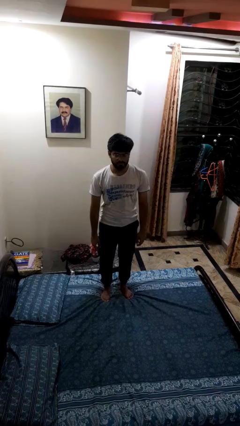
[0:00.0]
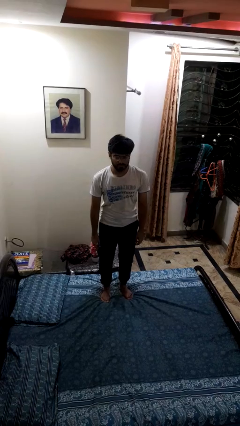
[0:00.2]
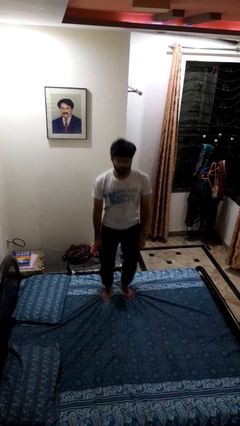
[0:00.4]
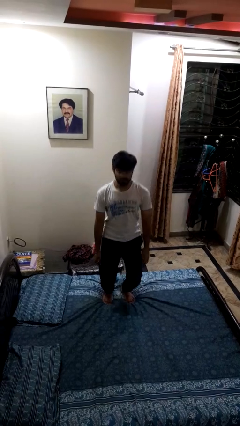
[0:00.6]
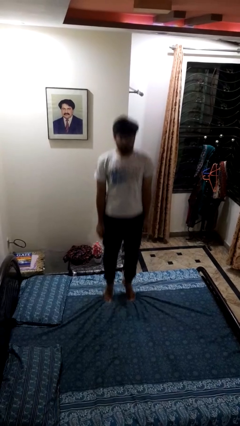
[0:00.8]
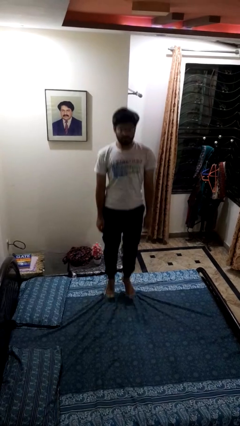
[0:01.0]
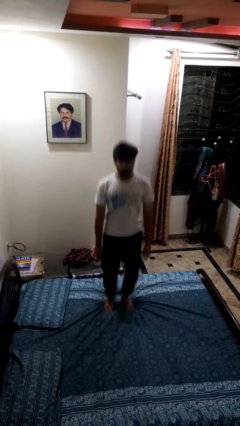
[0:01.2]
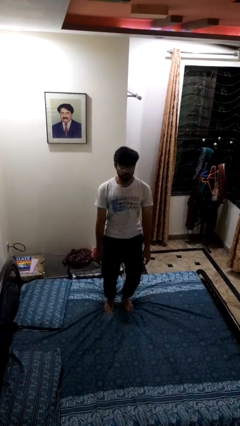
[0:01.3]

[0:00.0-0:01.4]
person jumps on bed

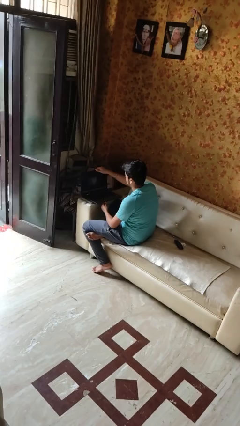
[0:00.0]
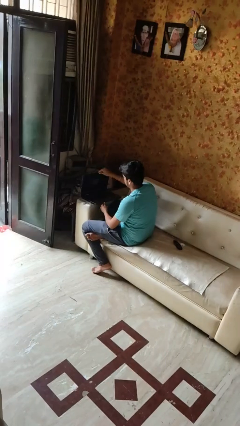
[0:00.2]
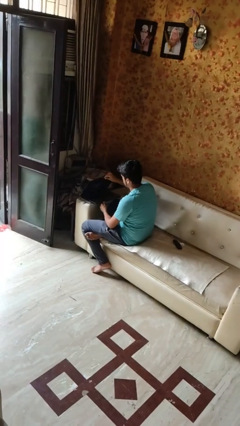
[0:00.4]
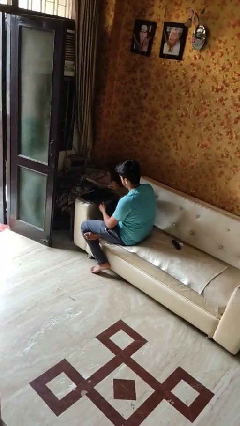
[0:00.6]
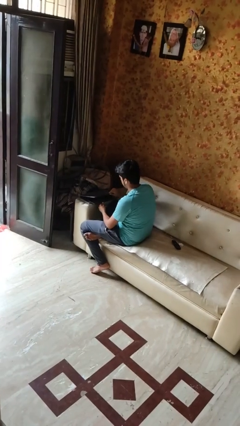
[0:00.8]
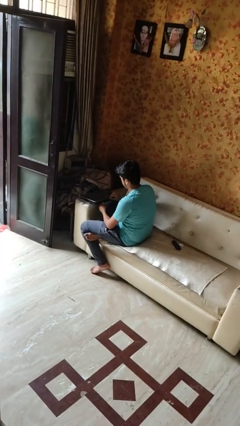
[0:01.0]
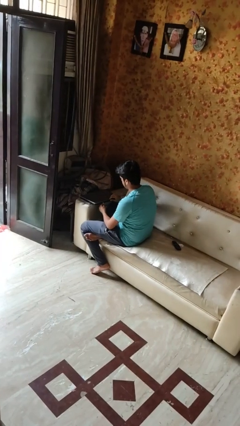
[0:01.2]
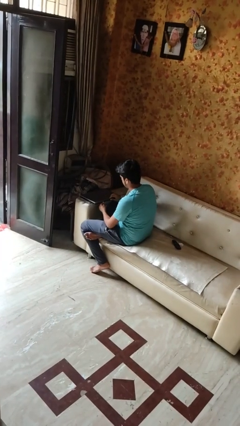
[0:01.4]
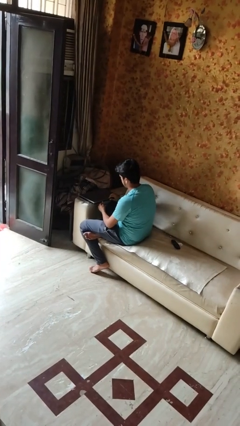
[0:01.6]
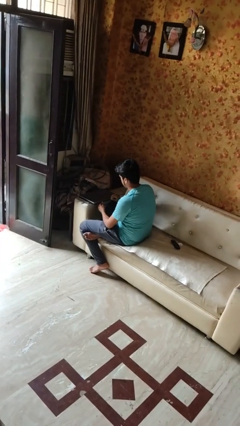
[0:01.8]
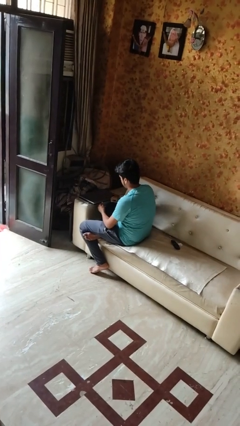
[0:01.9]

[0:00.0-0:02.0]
person closes laptop

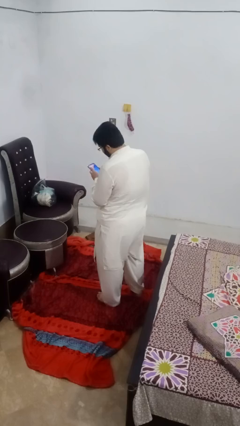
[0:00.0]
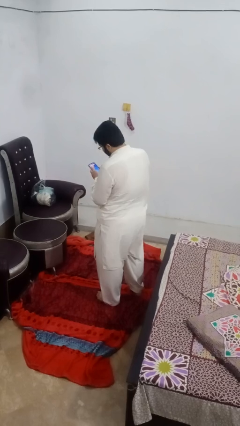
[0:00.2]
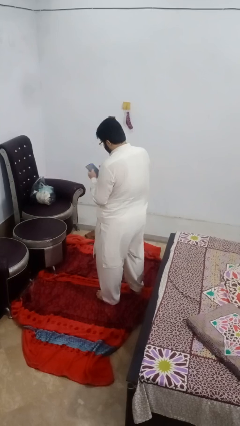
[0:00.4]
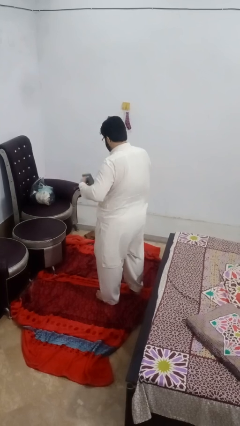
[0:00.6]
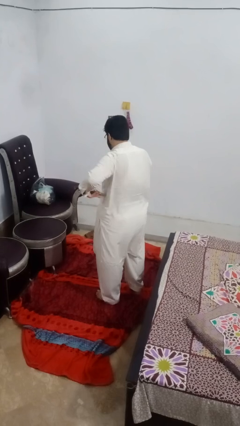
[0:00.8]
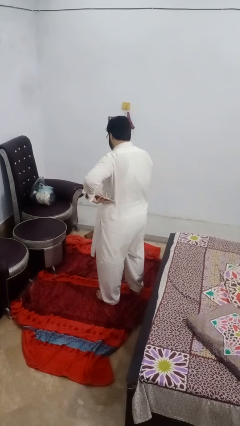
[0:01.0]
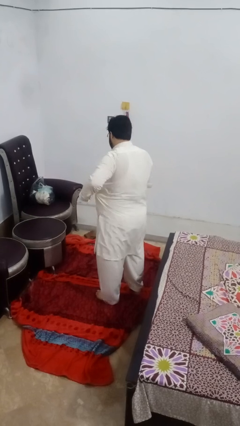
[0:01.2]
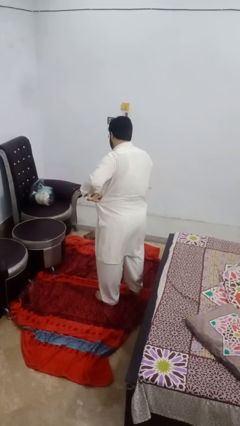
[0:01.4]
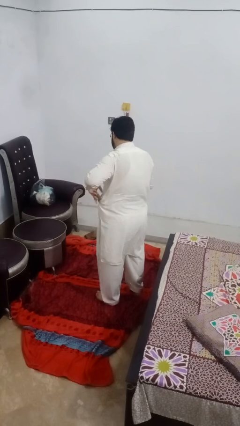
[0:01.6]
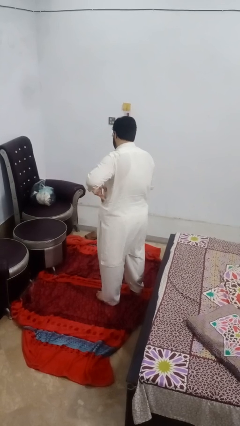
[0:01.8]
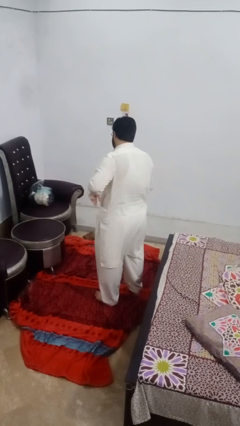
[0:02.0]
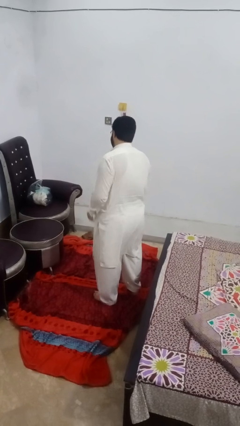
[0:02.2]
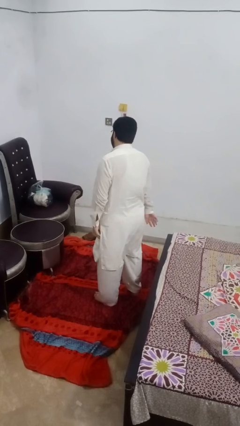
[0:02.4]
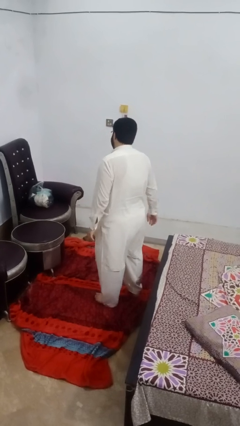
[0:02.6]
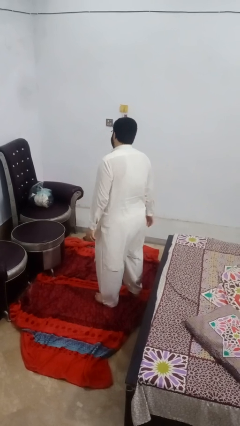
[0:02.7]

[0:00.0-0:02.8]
person puts phone into pocket

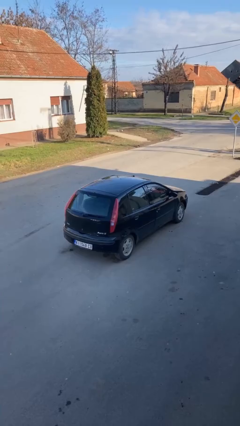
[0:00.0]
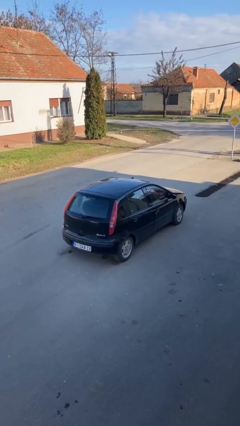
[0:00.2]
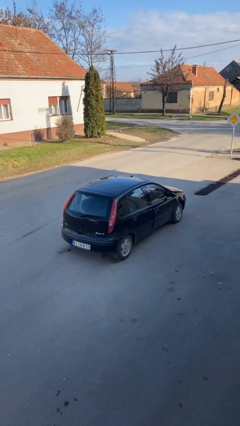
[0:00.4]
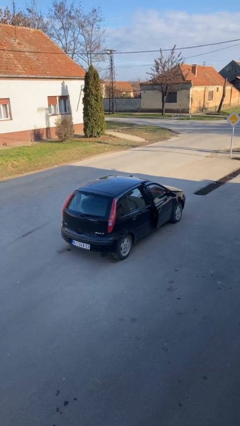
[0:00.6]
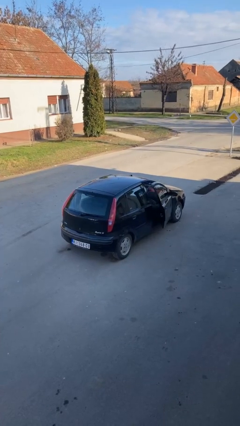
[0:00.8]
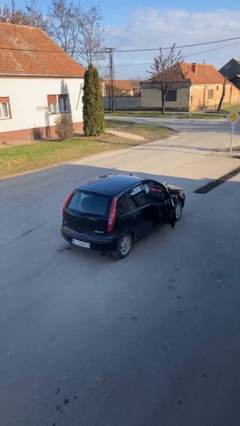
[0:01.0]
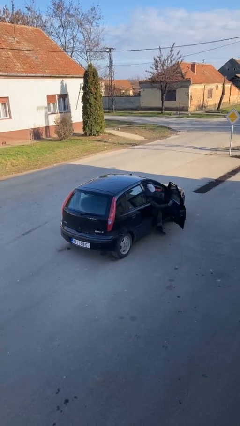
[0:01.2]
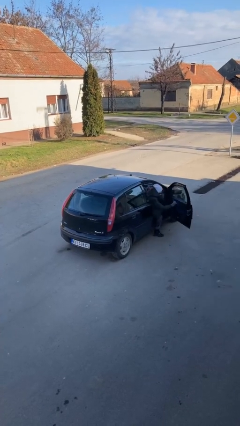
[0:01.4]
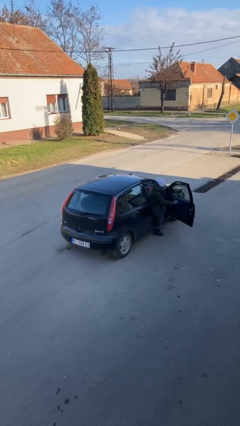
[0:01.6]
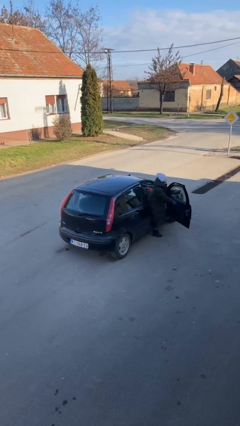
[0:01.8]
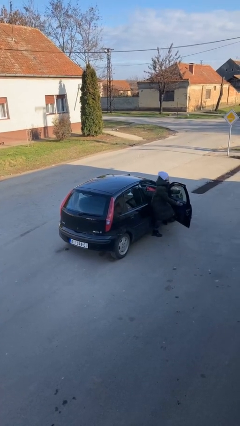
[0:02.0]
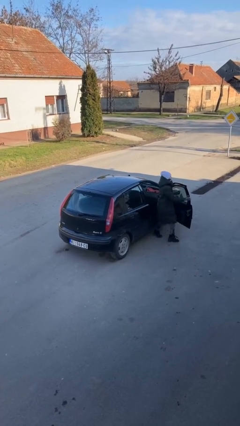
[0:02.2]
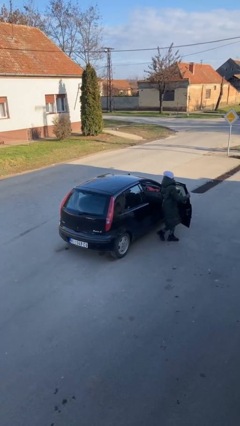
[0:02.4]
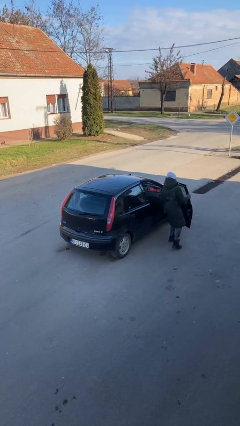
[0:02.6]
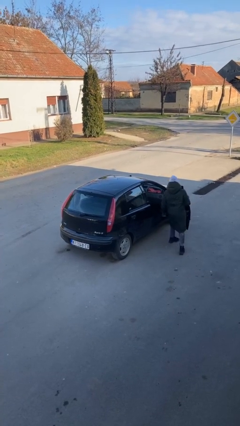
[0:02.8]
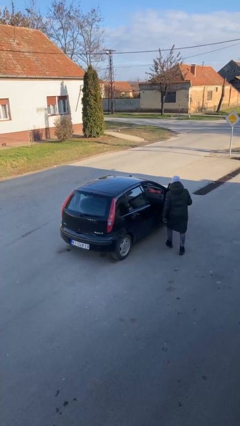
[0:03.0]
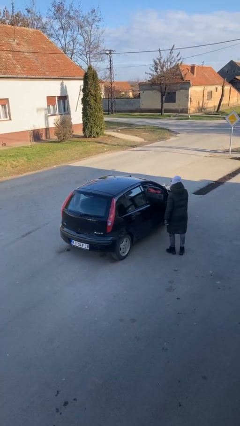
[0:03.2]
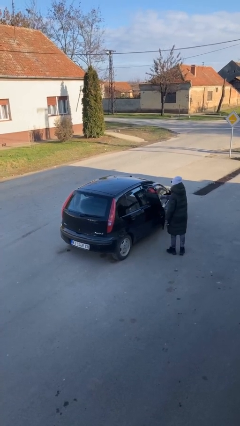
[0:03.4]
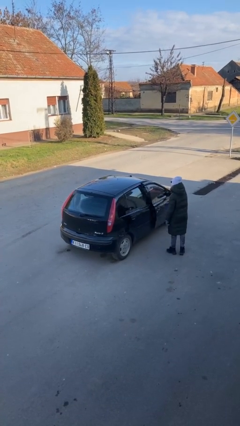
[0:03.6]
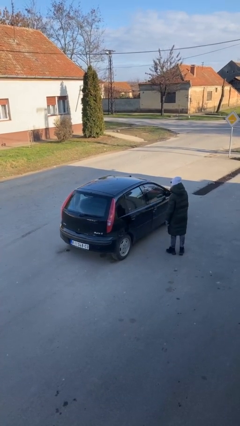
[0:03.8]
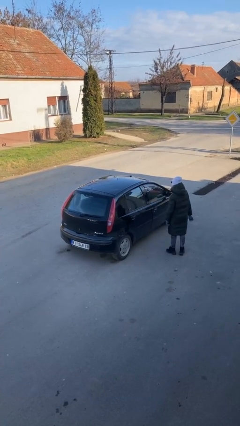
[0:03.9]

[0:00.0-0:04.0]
car drops off person

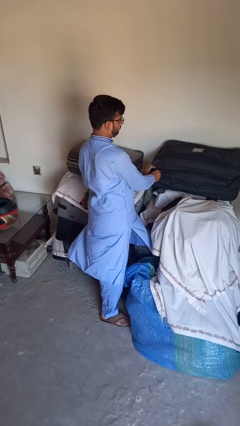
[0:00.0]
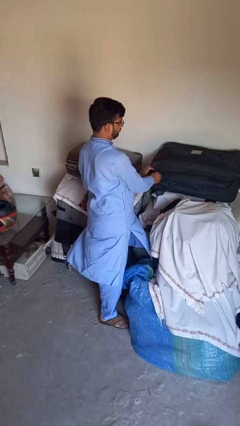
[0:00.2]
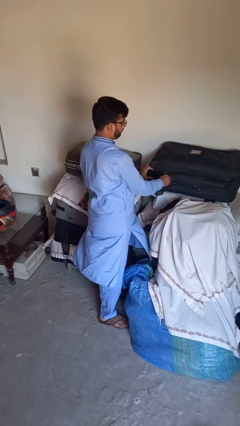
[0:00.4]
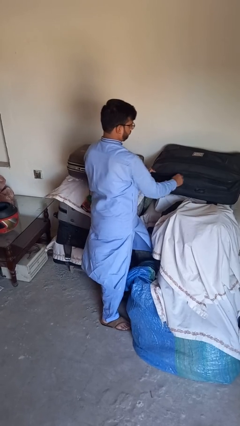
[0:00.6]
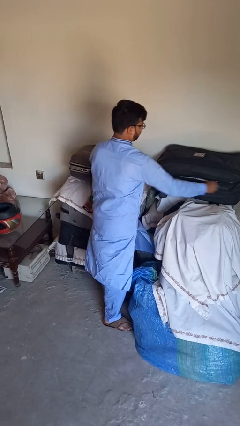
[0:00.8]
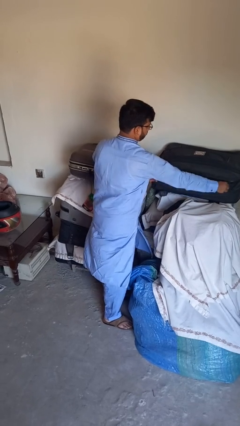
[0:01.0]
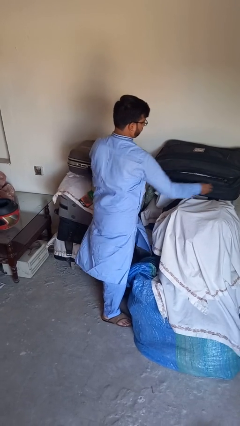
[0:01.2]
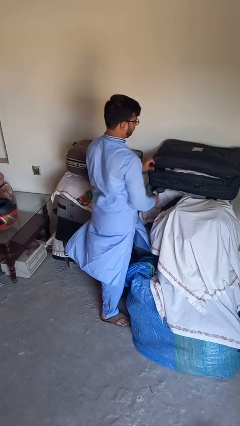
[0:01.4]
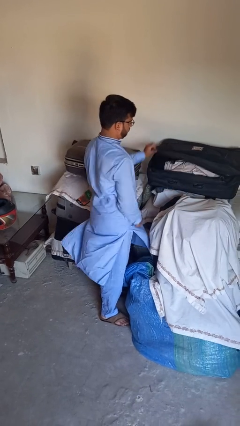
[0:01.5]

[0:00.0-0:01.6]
person opens suitcase

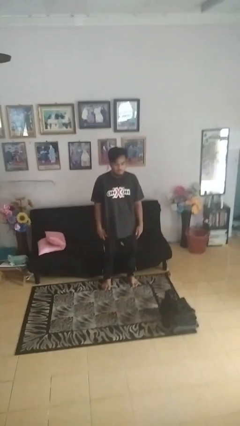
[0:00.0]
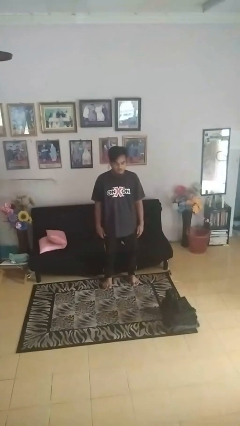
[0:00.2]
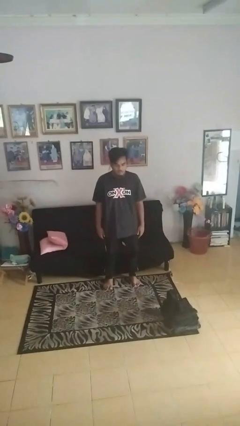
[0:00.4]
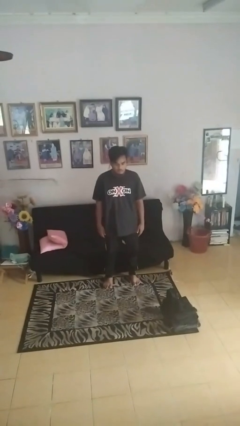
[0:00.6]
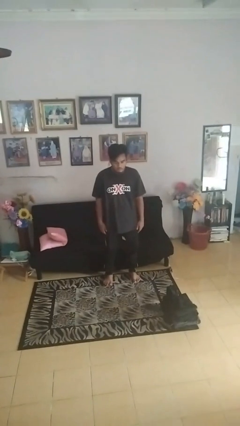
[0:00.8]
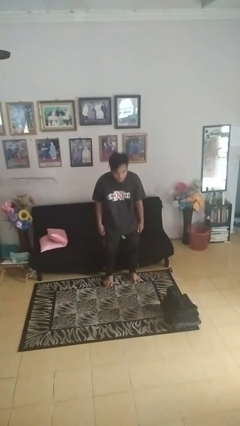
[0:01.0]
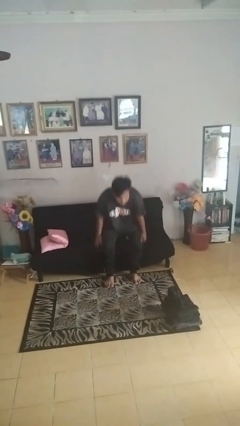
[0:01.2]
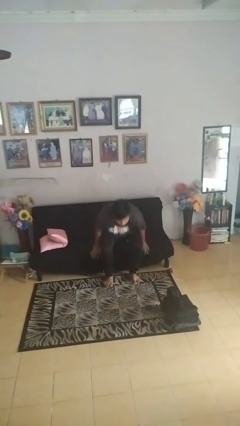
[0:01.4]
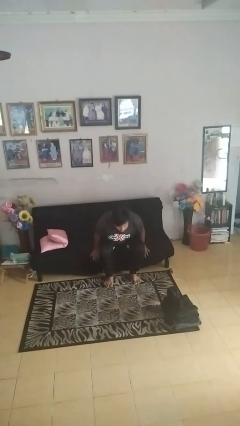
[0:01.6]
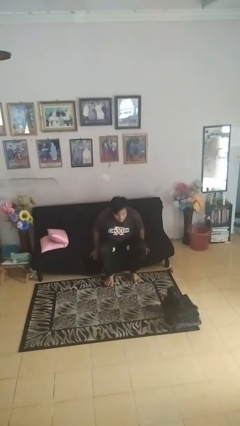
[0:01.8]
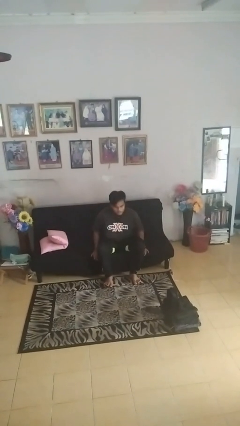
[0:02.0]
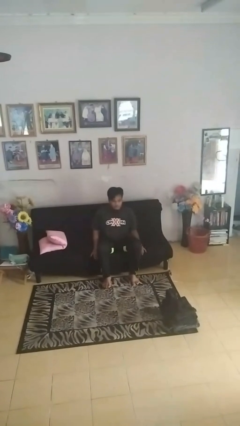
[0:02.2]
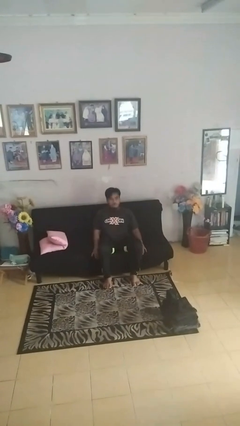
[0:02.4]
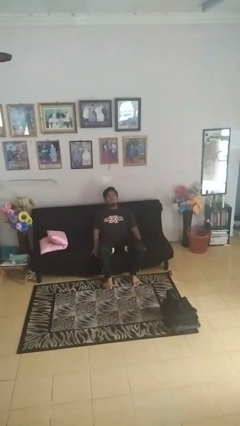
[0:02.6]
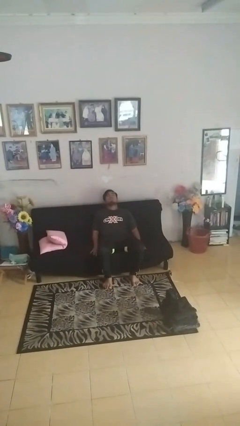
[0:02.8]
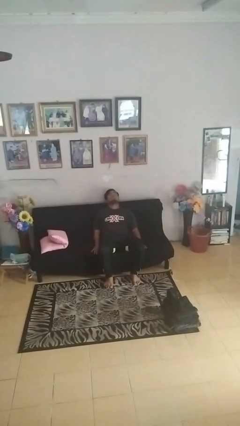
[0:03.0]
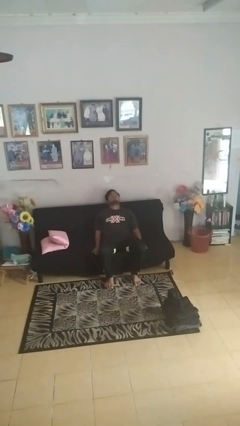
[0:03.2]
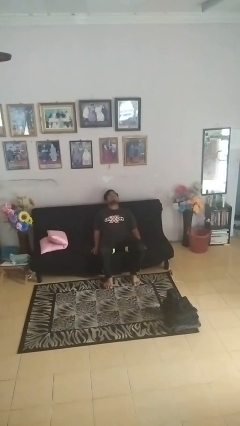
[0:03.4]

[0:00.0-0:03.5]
person lies down on couch

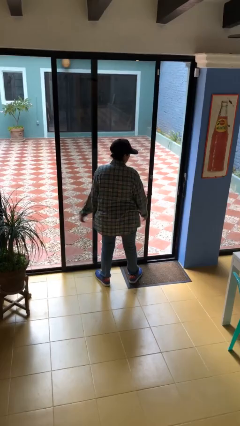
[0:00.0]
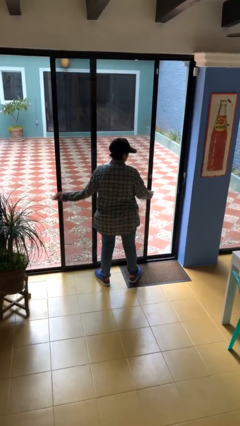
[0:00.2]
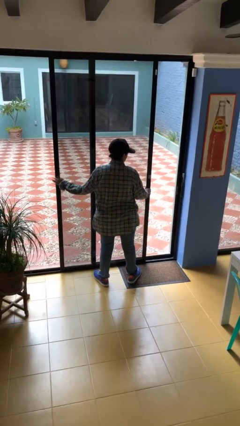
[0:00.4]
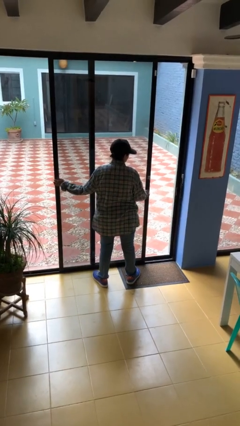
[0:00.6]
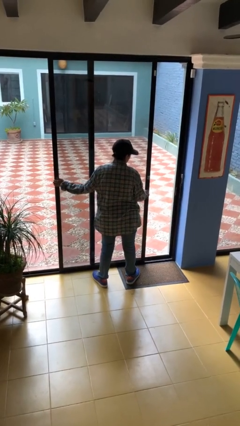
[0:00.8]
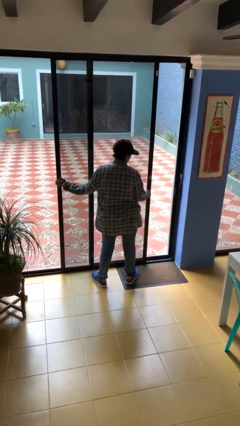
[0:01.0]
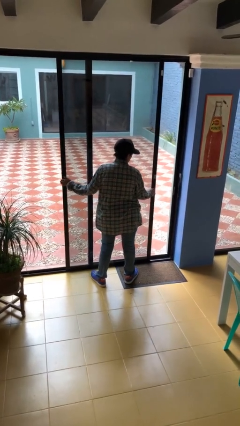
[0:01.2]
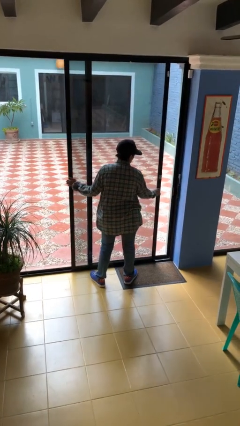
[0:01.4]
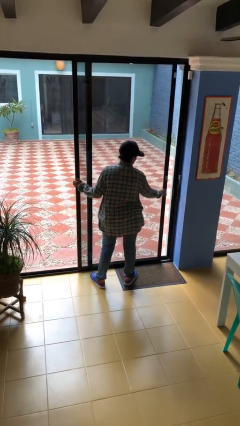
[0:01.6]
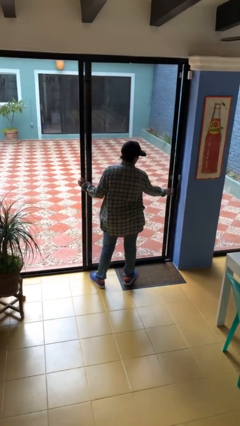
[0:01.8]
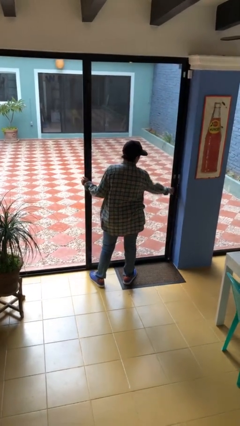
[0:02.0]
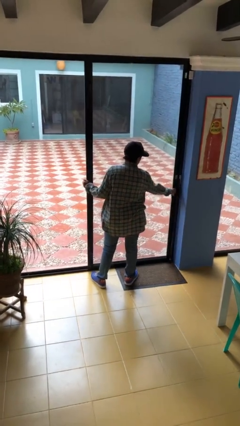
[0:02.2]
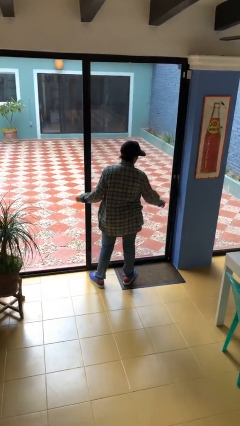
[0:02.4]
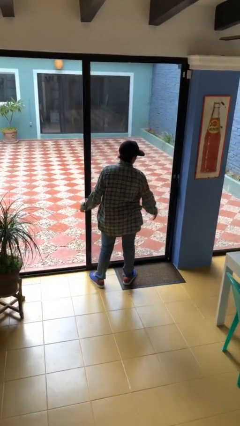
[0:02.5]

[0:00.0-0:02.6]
person closes sliding door
